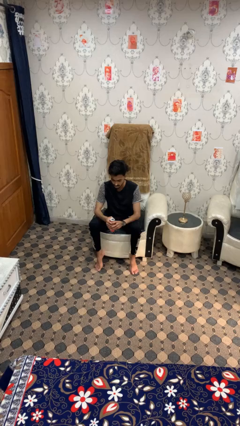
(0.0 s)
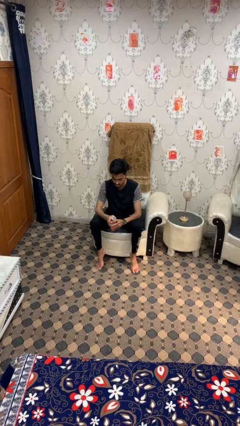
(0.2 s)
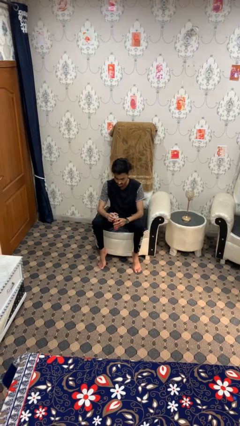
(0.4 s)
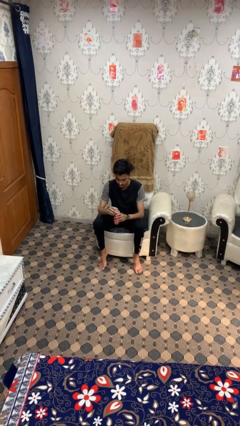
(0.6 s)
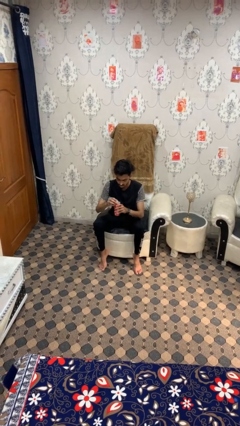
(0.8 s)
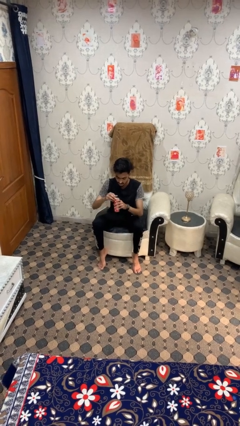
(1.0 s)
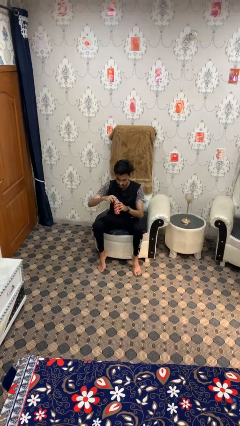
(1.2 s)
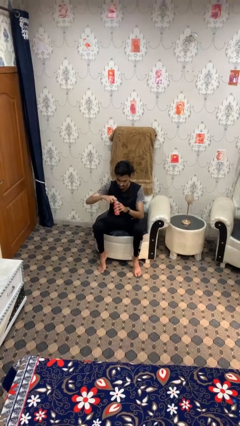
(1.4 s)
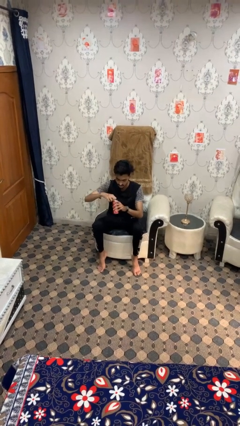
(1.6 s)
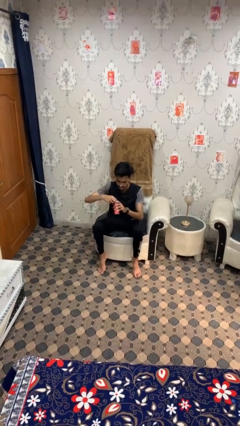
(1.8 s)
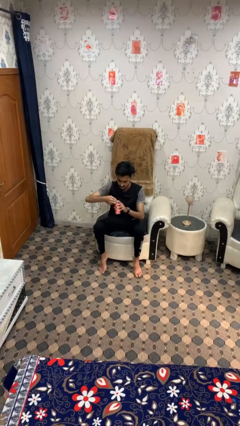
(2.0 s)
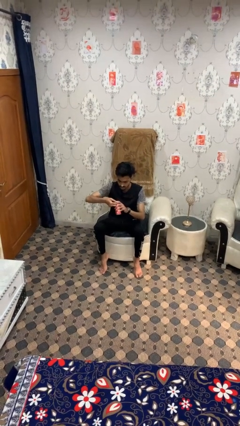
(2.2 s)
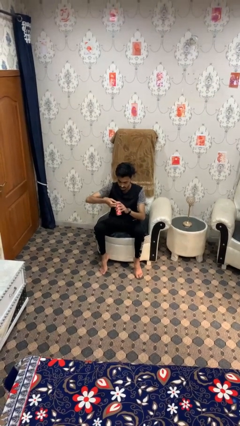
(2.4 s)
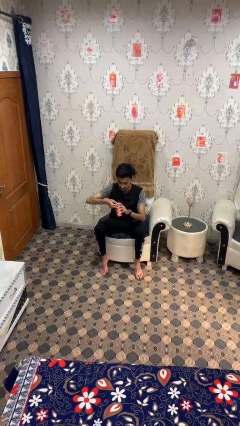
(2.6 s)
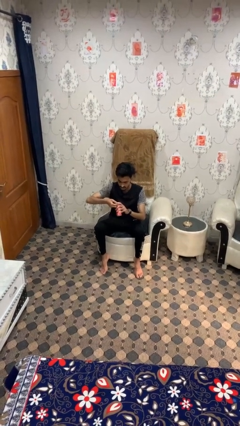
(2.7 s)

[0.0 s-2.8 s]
person opens beverage can

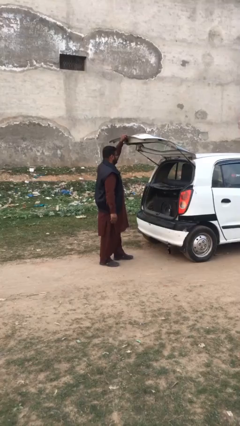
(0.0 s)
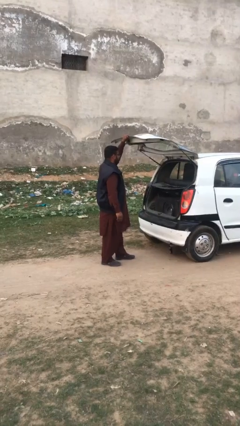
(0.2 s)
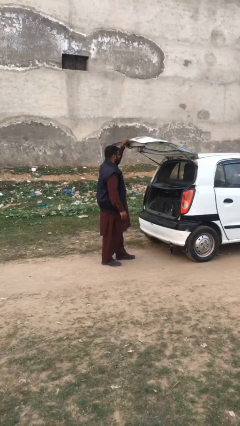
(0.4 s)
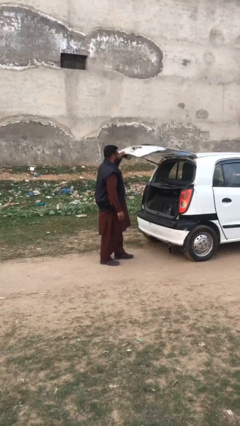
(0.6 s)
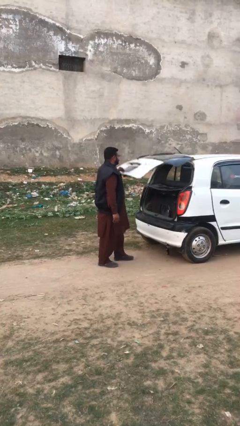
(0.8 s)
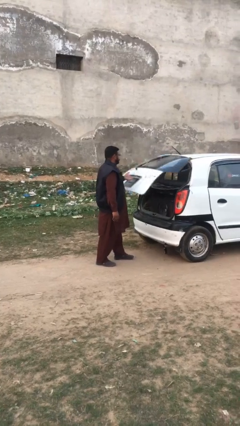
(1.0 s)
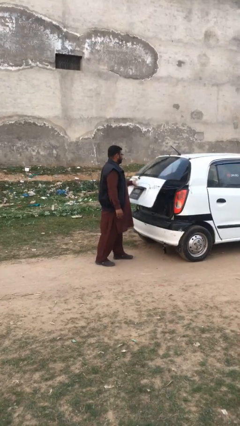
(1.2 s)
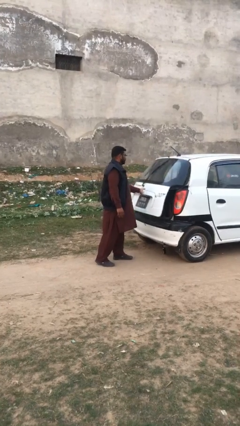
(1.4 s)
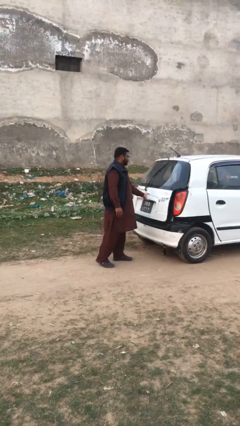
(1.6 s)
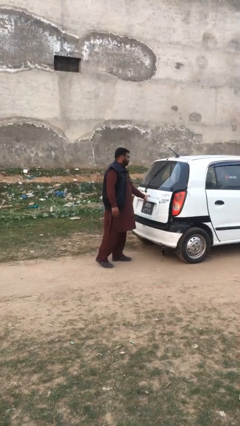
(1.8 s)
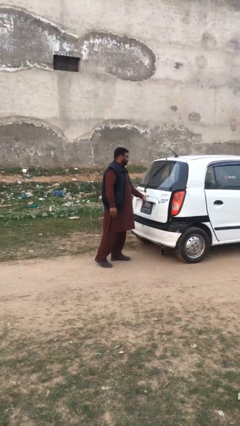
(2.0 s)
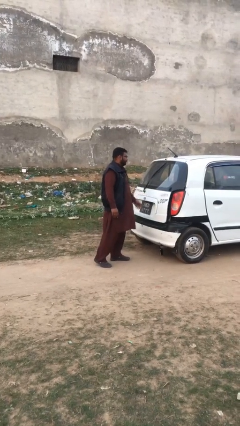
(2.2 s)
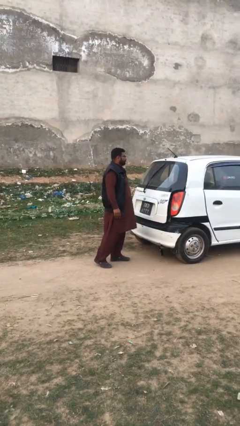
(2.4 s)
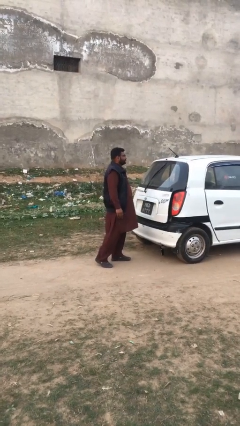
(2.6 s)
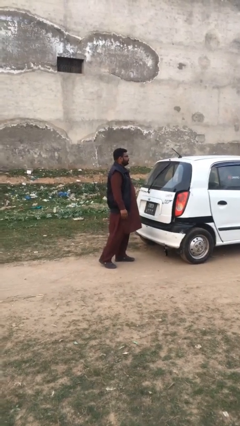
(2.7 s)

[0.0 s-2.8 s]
person closes car trunk

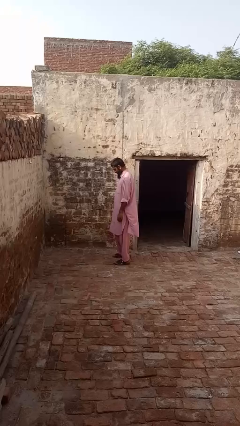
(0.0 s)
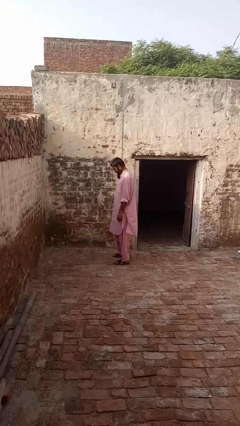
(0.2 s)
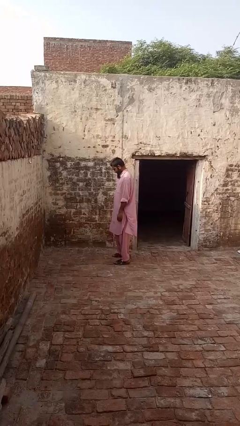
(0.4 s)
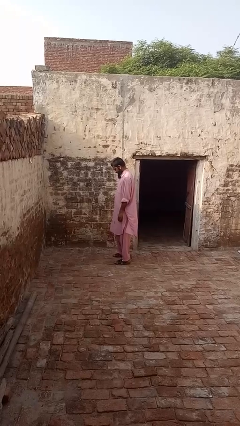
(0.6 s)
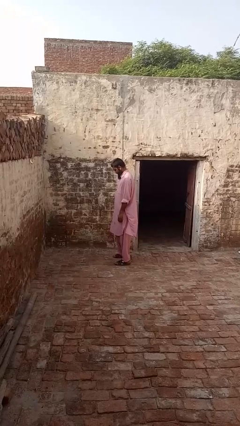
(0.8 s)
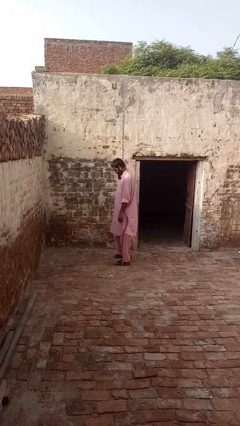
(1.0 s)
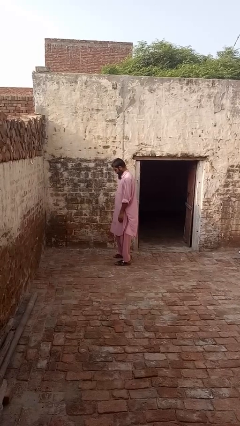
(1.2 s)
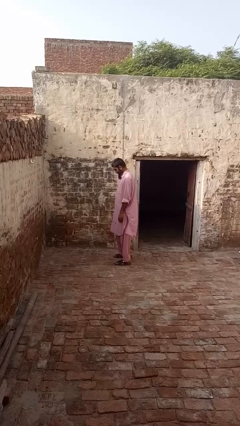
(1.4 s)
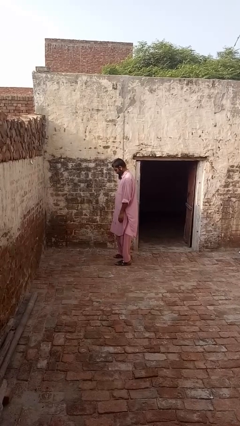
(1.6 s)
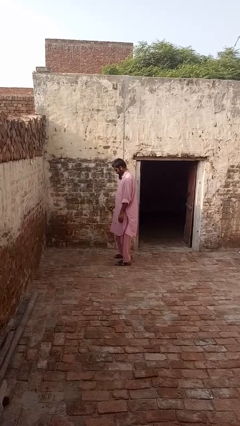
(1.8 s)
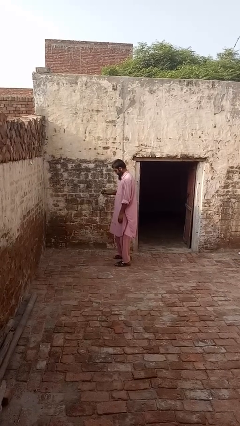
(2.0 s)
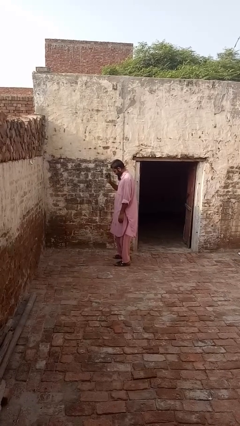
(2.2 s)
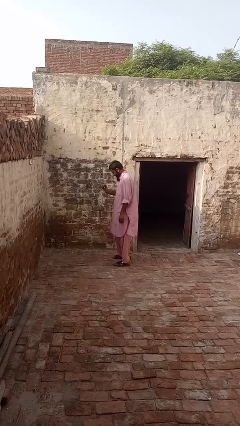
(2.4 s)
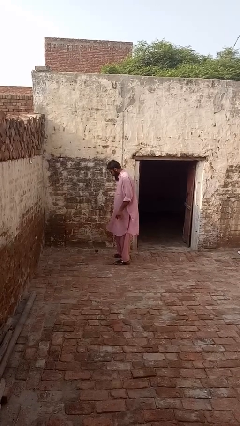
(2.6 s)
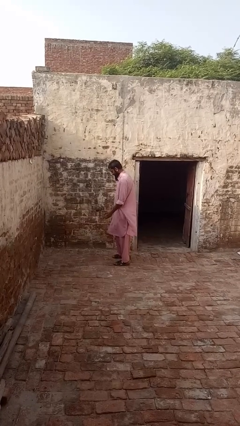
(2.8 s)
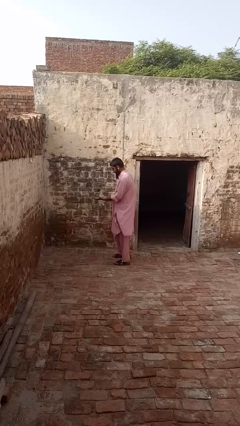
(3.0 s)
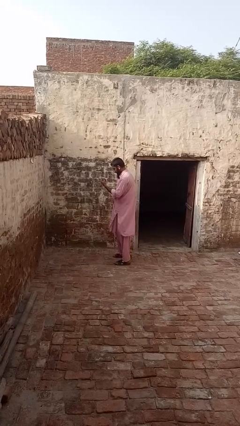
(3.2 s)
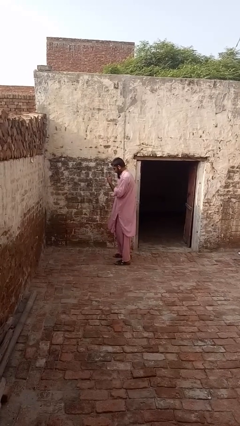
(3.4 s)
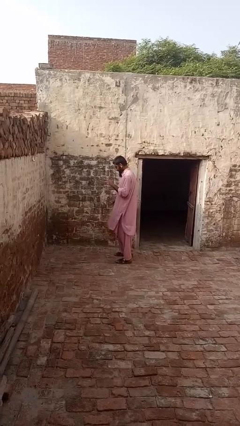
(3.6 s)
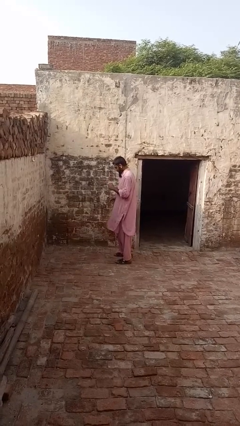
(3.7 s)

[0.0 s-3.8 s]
person bounces ball on floor

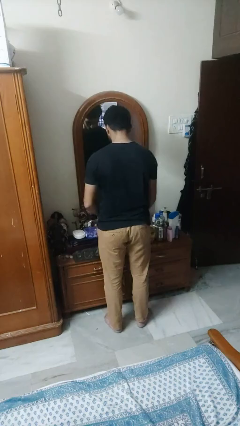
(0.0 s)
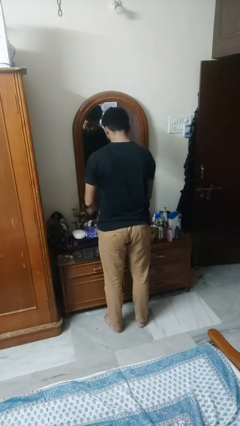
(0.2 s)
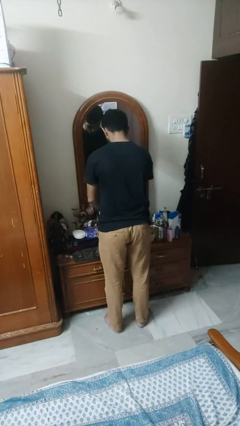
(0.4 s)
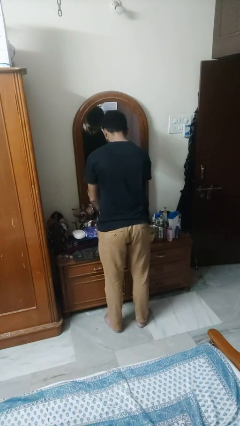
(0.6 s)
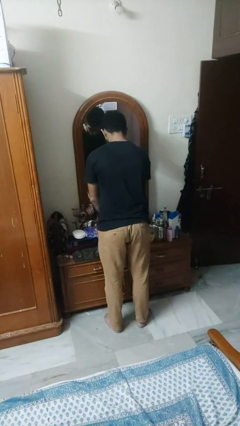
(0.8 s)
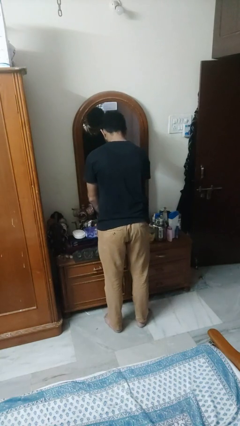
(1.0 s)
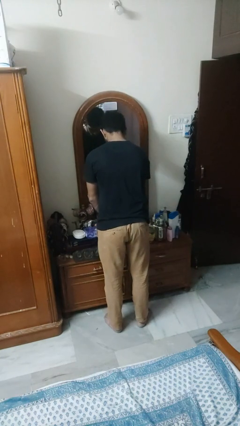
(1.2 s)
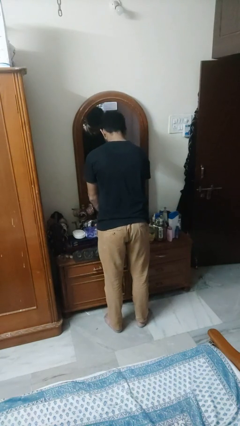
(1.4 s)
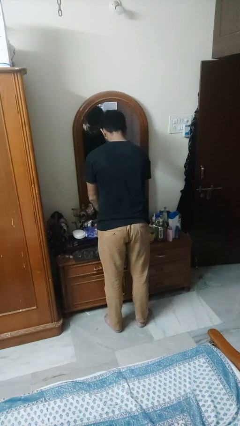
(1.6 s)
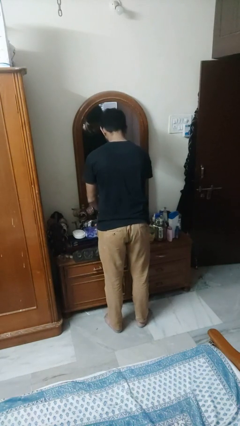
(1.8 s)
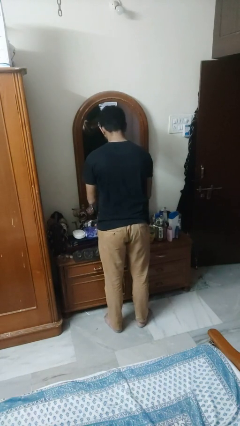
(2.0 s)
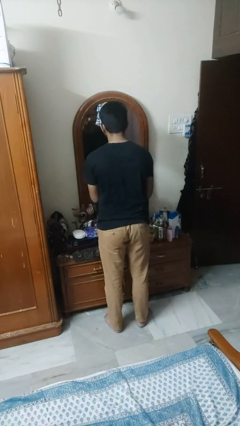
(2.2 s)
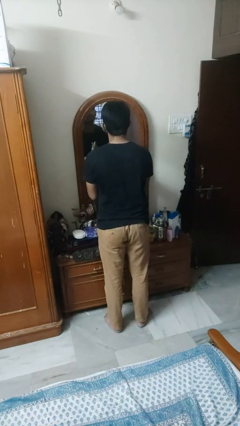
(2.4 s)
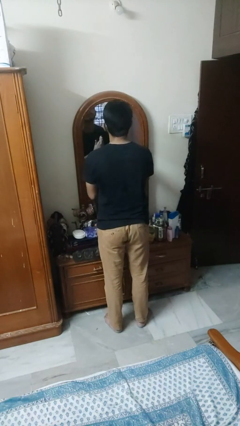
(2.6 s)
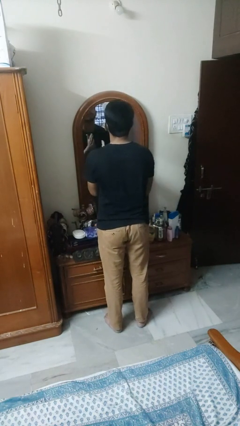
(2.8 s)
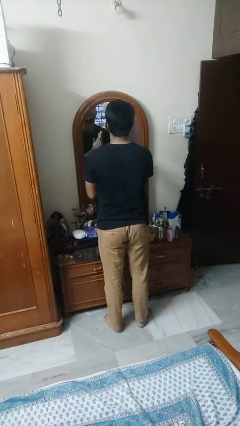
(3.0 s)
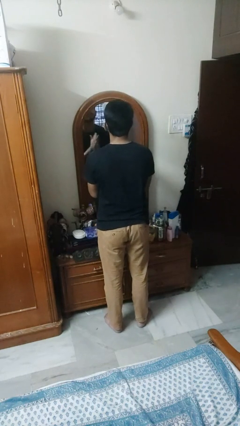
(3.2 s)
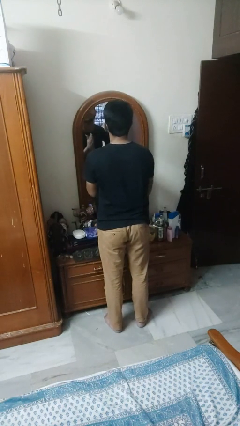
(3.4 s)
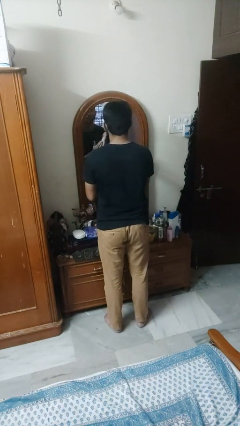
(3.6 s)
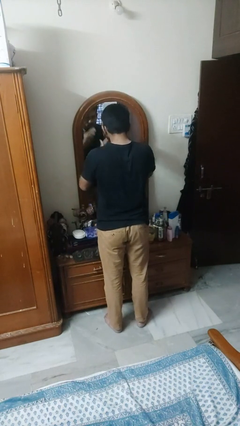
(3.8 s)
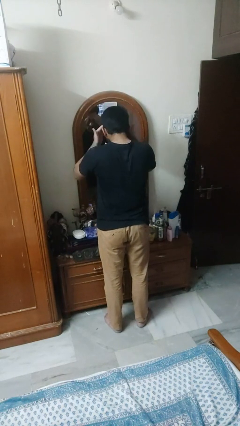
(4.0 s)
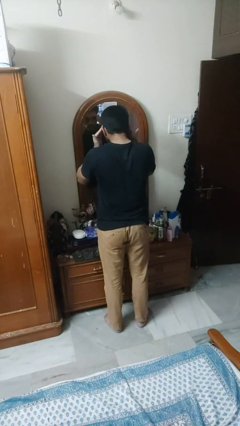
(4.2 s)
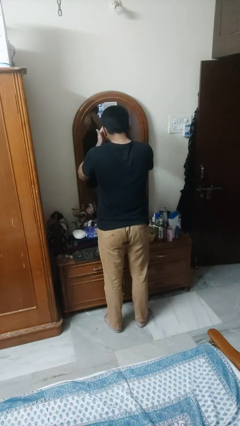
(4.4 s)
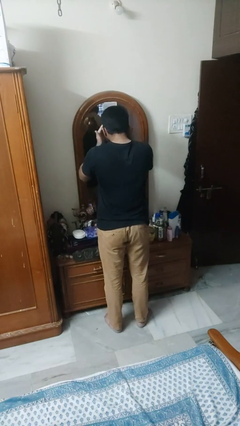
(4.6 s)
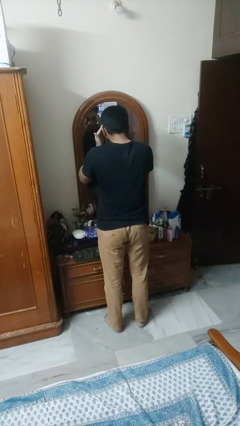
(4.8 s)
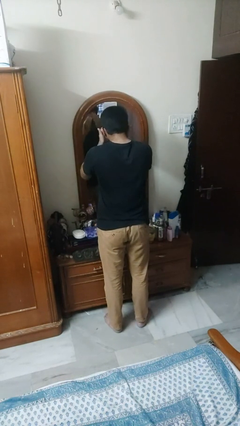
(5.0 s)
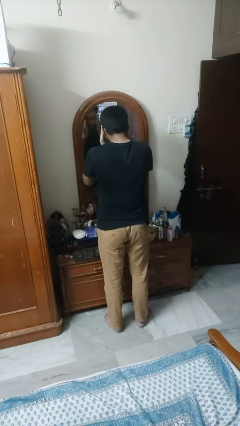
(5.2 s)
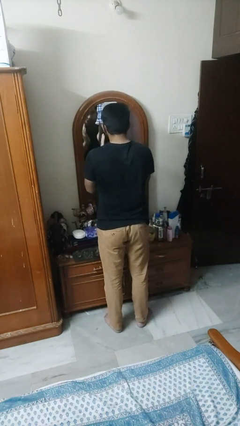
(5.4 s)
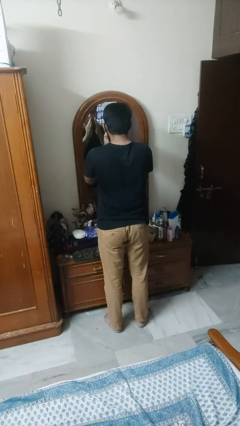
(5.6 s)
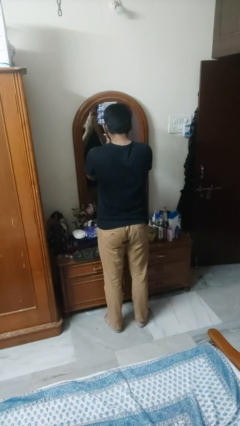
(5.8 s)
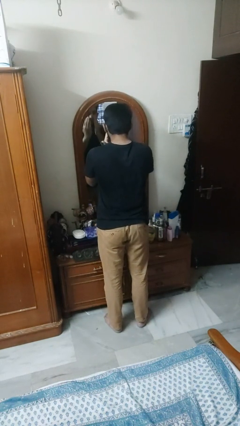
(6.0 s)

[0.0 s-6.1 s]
person applies sunscreen

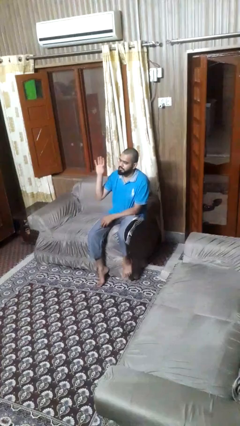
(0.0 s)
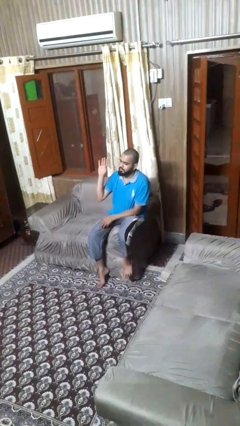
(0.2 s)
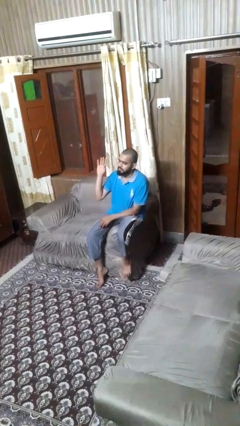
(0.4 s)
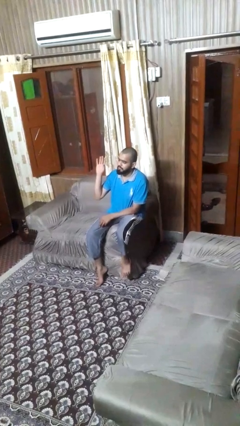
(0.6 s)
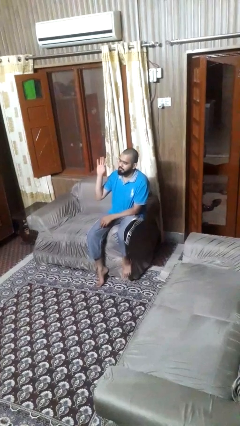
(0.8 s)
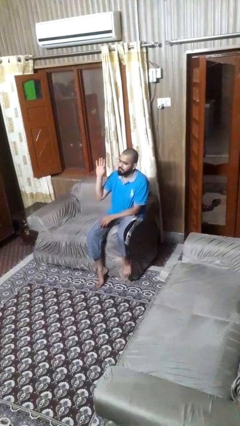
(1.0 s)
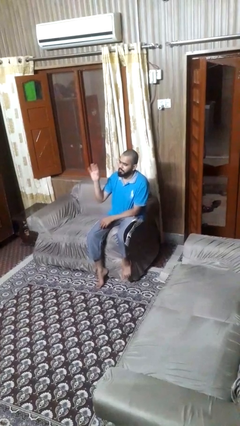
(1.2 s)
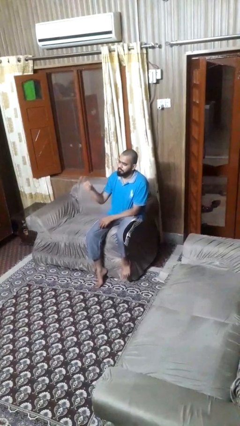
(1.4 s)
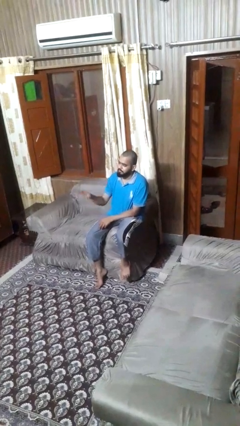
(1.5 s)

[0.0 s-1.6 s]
person gestures raise hand

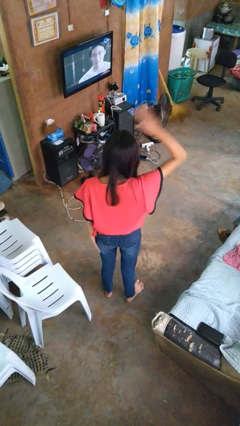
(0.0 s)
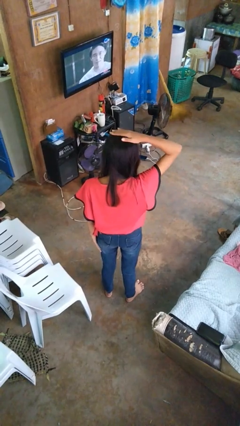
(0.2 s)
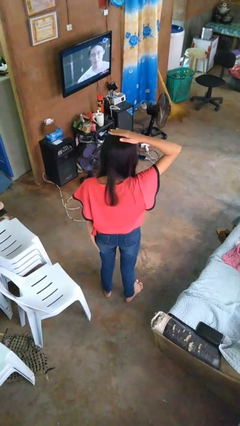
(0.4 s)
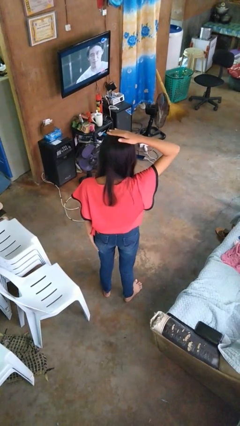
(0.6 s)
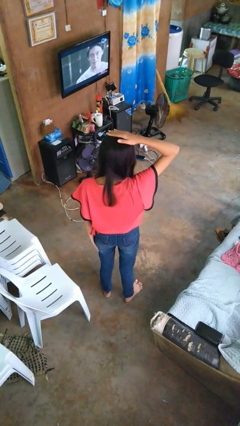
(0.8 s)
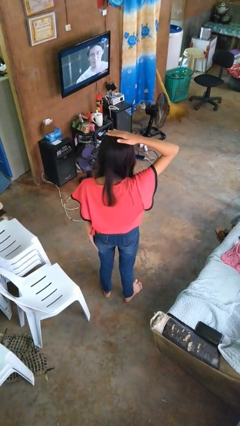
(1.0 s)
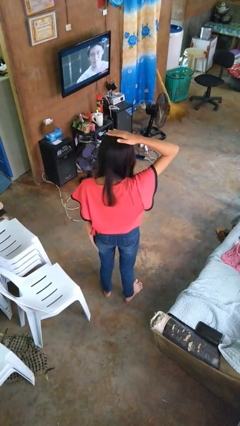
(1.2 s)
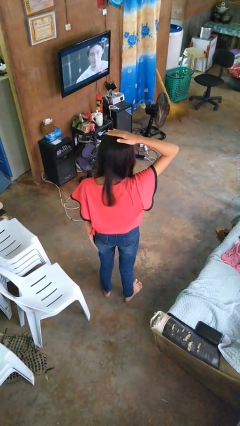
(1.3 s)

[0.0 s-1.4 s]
person pats head
